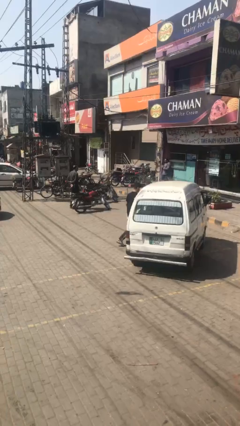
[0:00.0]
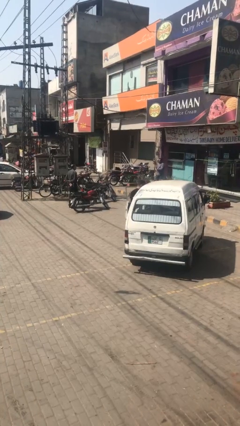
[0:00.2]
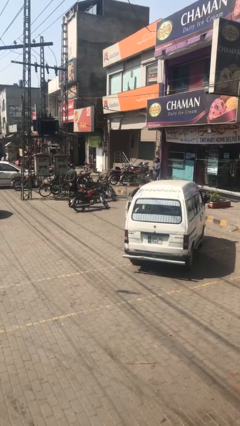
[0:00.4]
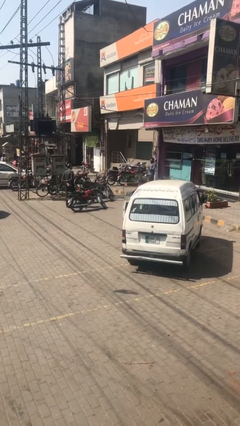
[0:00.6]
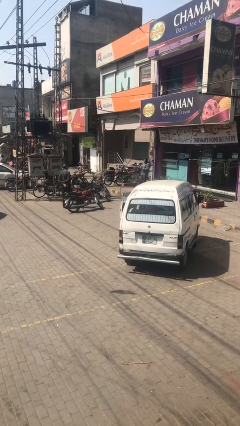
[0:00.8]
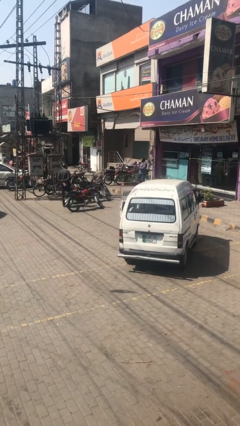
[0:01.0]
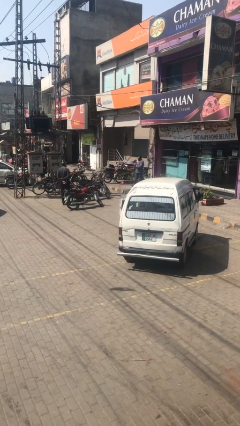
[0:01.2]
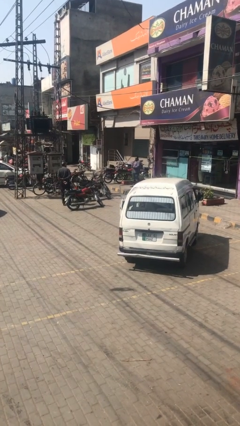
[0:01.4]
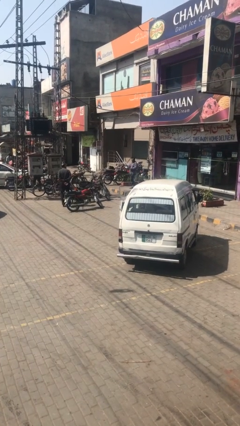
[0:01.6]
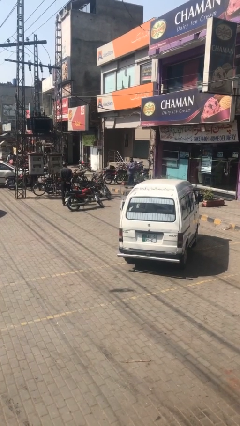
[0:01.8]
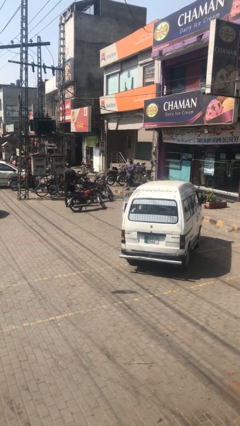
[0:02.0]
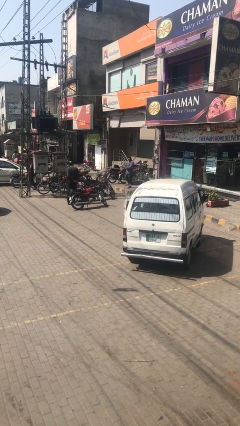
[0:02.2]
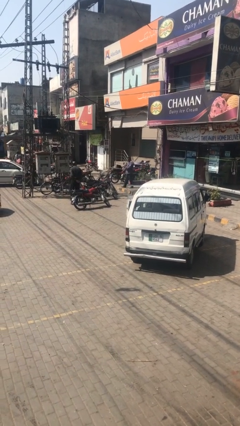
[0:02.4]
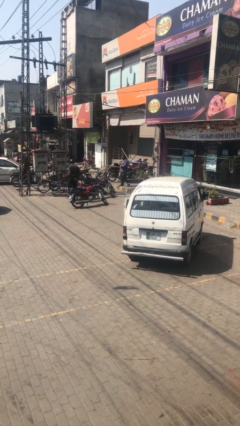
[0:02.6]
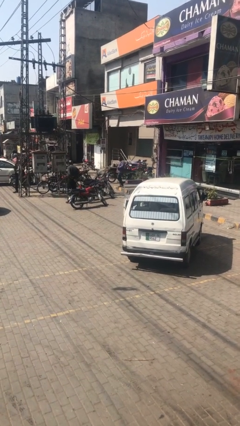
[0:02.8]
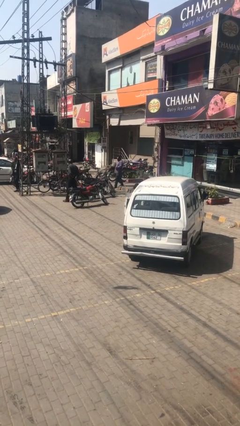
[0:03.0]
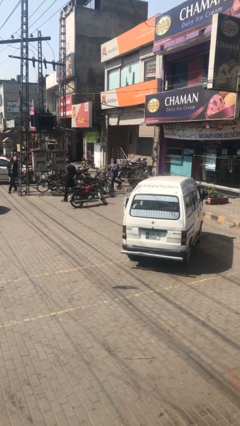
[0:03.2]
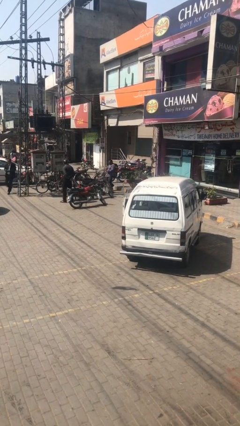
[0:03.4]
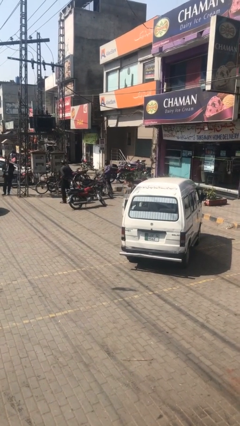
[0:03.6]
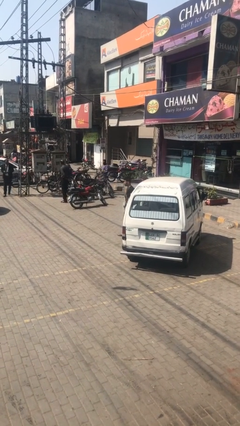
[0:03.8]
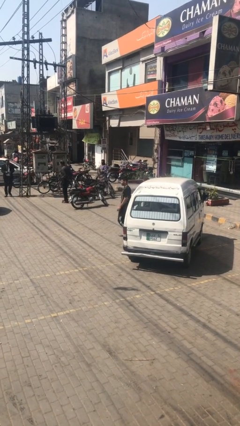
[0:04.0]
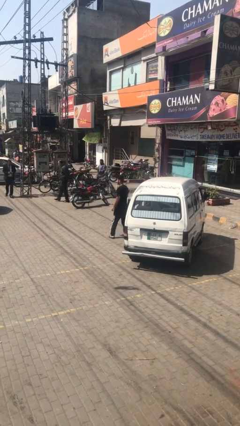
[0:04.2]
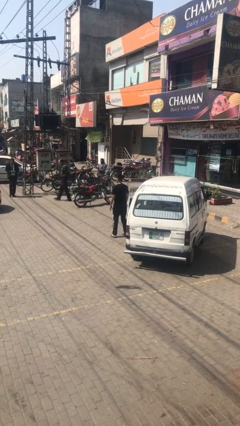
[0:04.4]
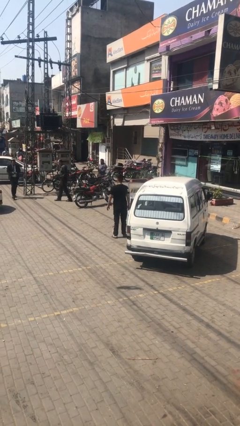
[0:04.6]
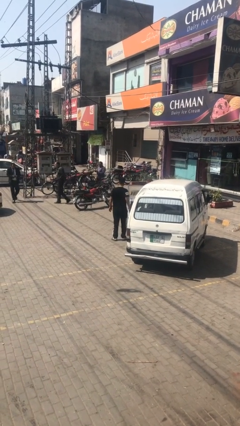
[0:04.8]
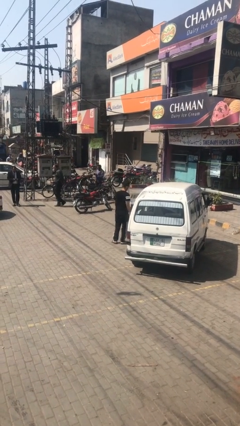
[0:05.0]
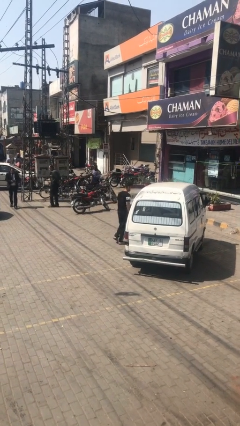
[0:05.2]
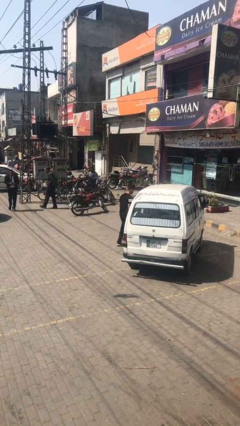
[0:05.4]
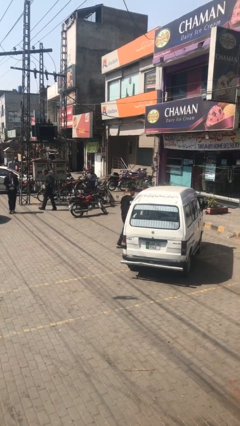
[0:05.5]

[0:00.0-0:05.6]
person enters car

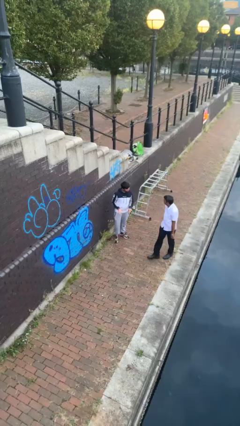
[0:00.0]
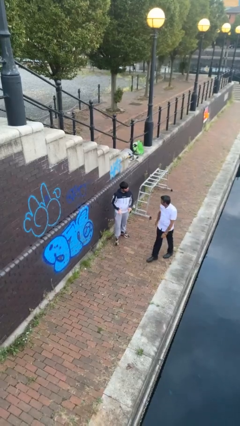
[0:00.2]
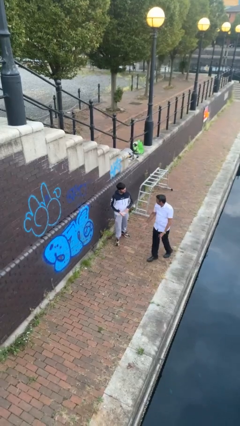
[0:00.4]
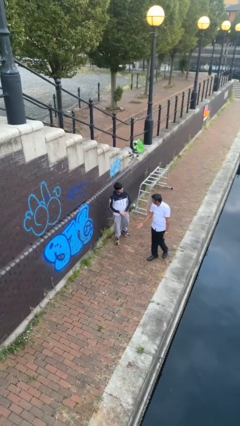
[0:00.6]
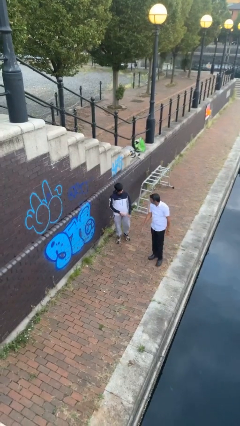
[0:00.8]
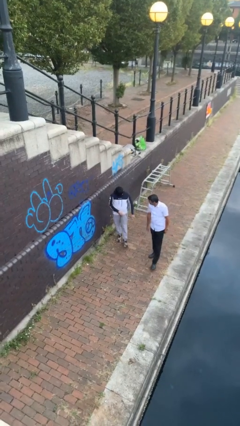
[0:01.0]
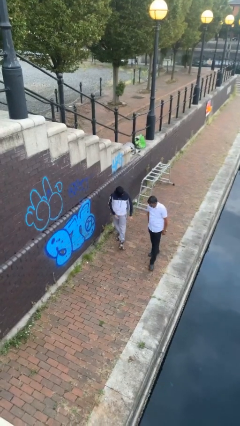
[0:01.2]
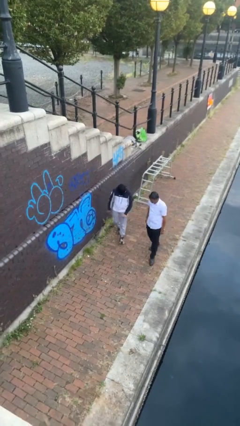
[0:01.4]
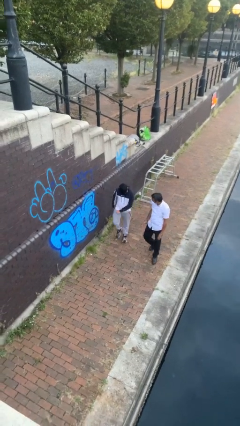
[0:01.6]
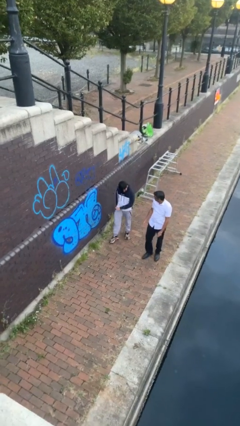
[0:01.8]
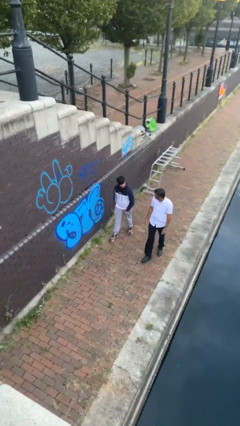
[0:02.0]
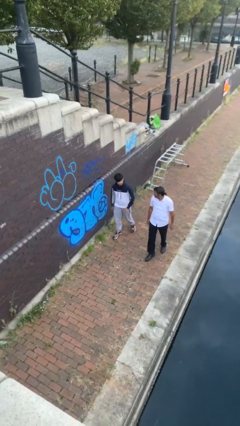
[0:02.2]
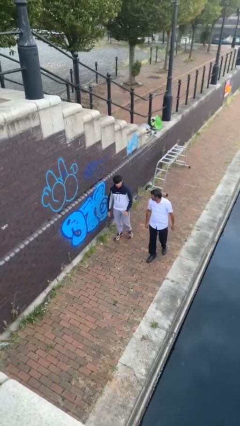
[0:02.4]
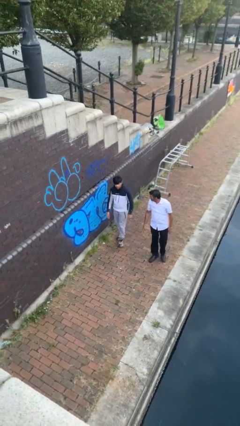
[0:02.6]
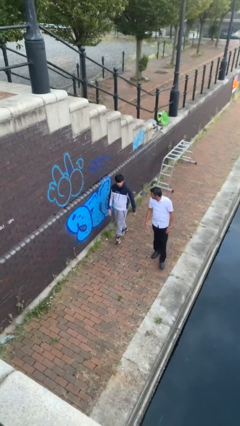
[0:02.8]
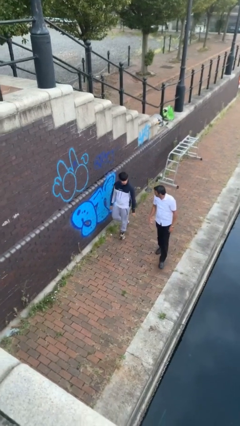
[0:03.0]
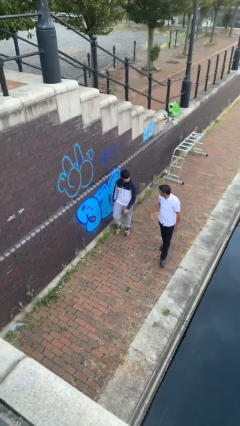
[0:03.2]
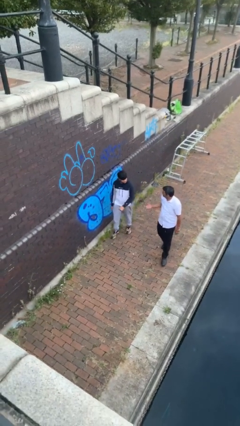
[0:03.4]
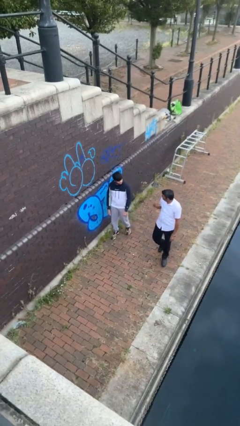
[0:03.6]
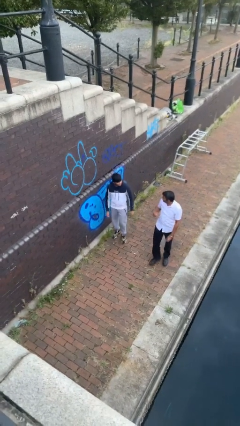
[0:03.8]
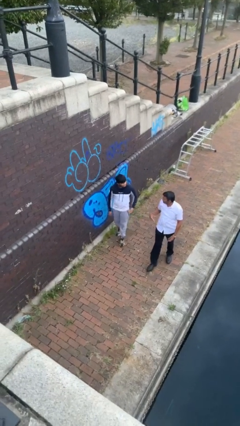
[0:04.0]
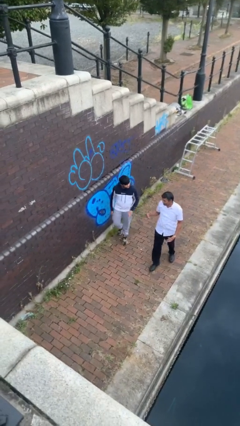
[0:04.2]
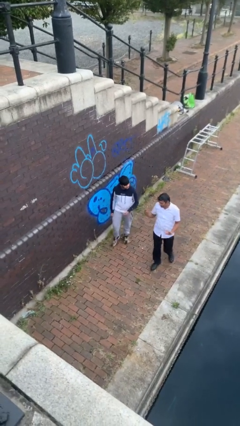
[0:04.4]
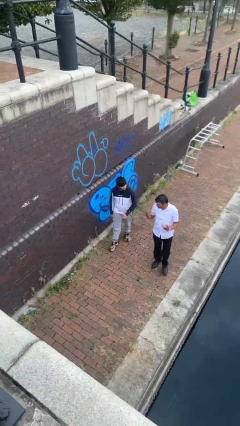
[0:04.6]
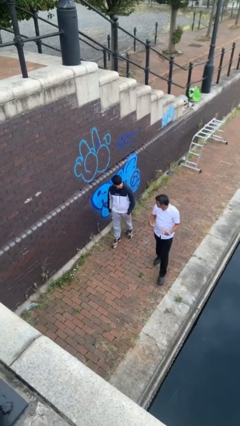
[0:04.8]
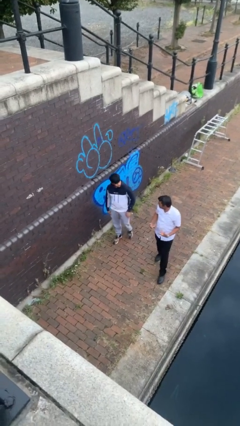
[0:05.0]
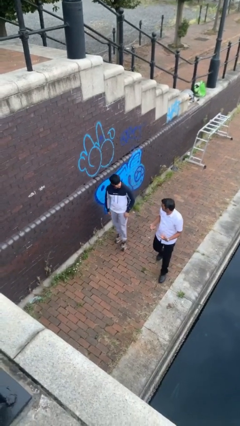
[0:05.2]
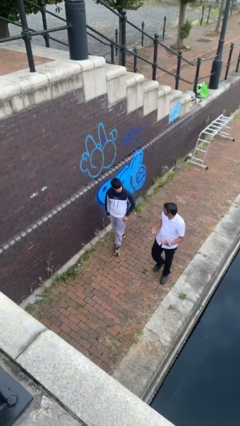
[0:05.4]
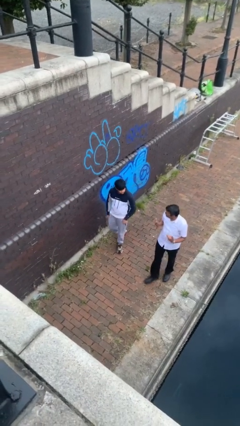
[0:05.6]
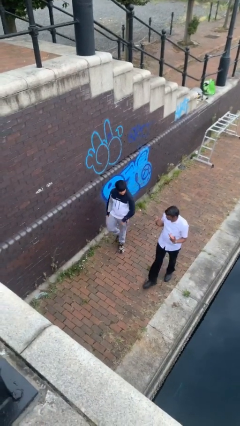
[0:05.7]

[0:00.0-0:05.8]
person talks to person

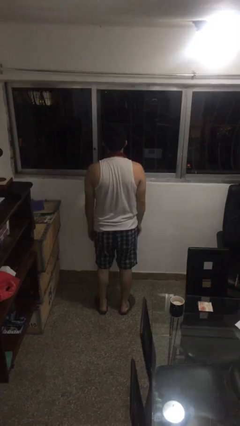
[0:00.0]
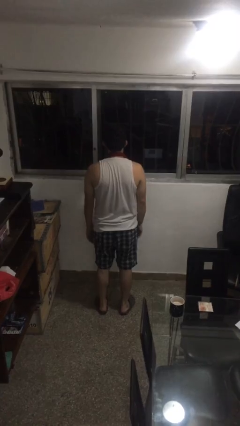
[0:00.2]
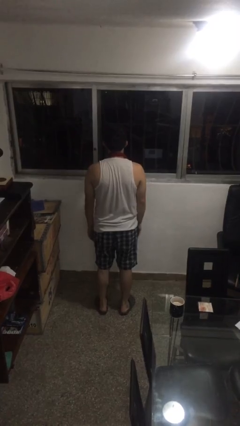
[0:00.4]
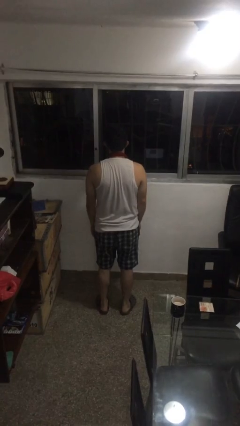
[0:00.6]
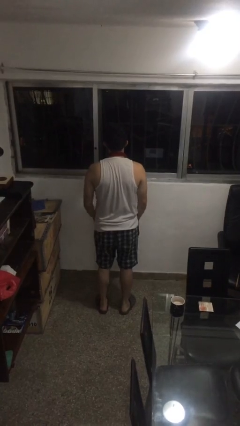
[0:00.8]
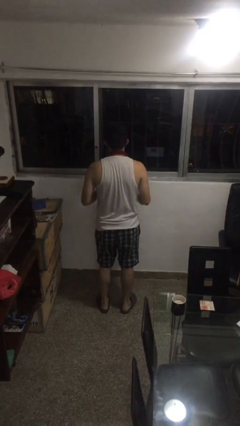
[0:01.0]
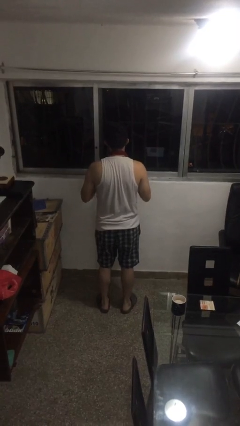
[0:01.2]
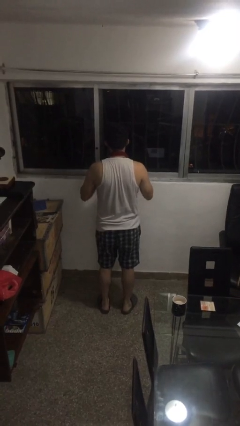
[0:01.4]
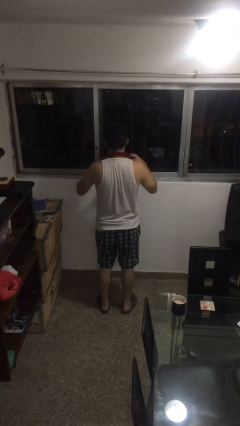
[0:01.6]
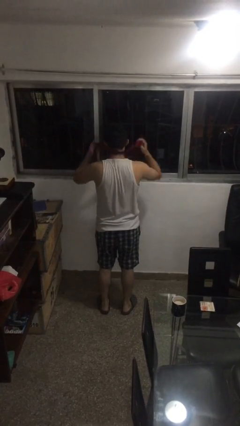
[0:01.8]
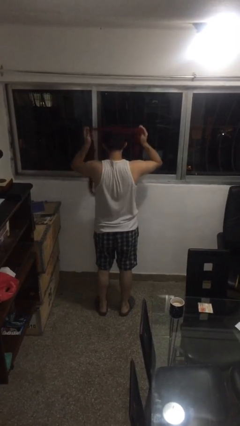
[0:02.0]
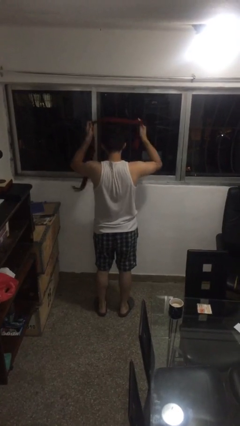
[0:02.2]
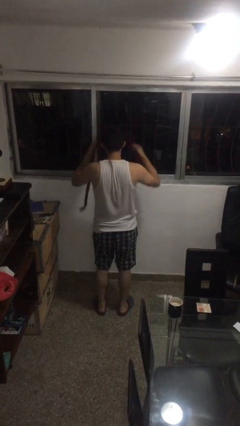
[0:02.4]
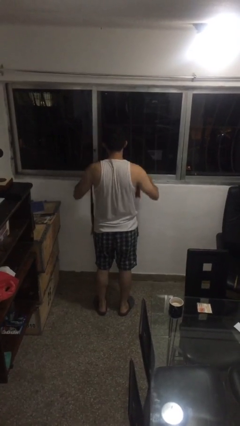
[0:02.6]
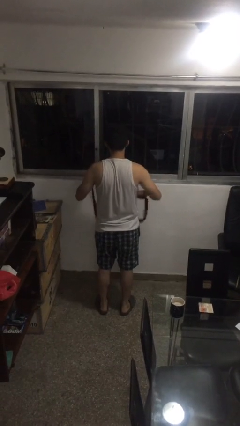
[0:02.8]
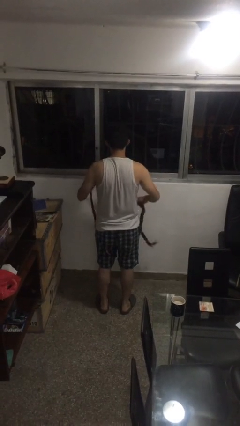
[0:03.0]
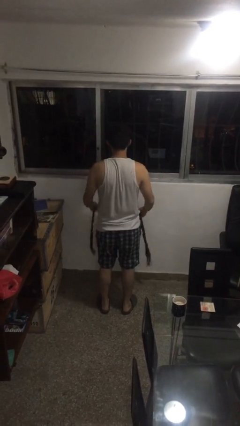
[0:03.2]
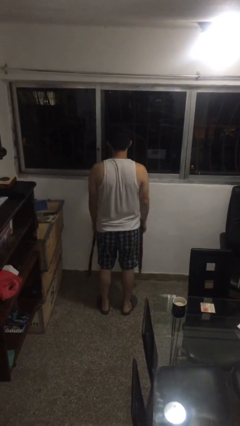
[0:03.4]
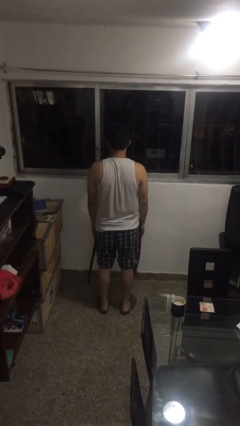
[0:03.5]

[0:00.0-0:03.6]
person takes off scarf

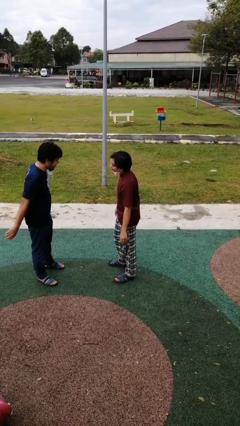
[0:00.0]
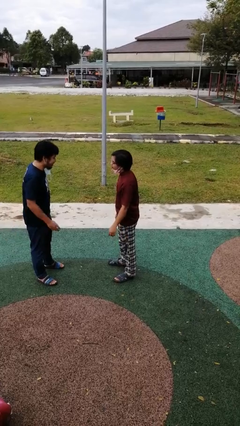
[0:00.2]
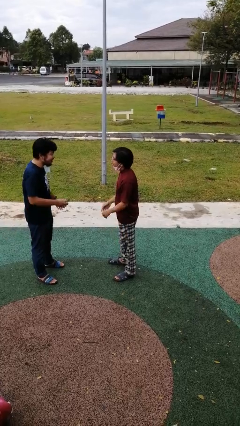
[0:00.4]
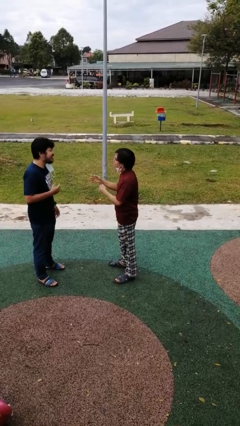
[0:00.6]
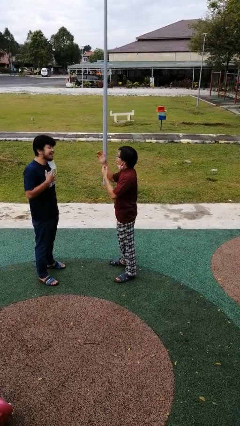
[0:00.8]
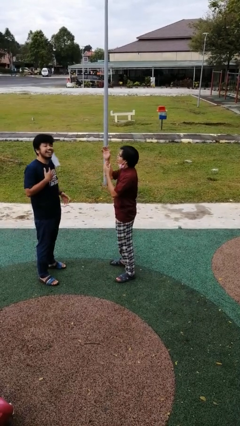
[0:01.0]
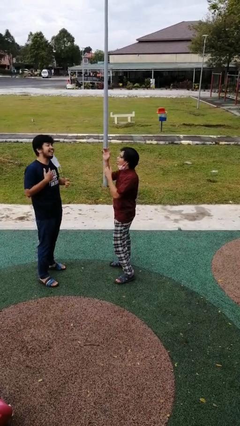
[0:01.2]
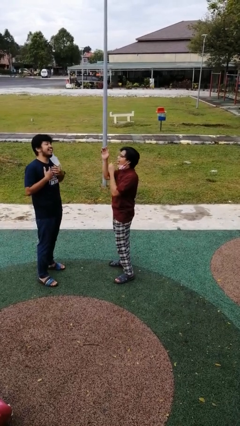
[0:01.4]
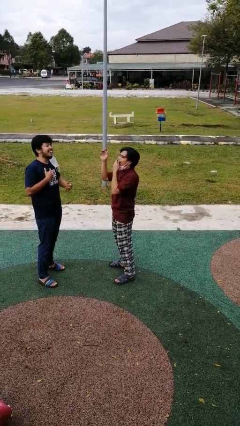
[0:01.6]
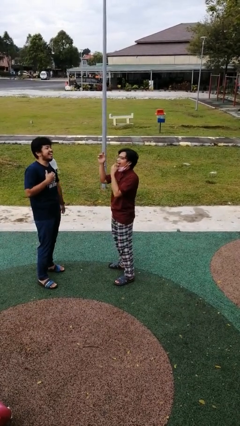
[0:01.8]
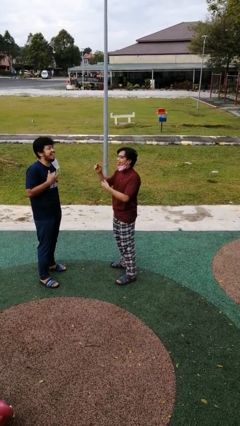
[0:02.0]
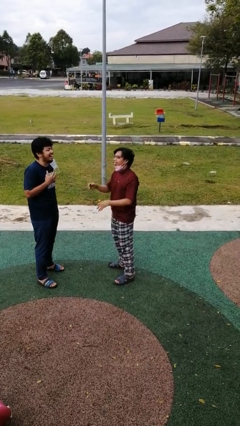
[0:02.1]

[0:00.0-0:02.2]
person laughs with person

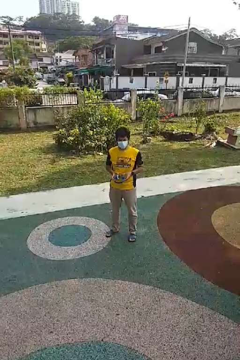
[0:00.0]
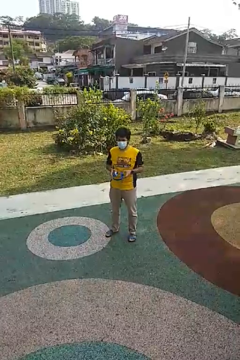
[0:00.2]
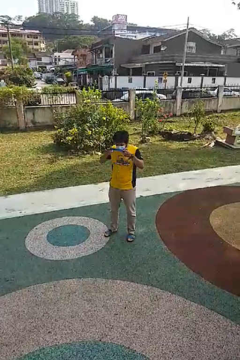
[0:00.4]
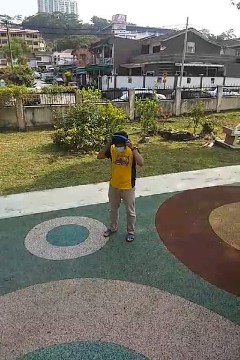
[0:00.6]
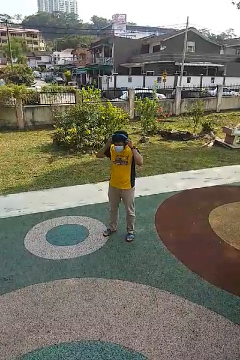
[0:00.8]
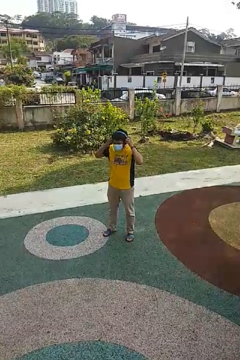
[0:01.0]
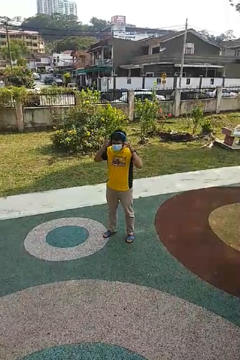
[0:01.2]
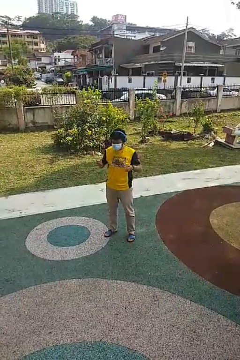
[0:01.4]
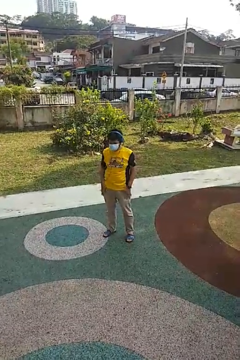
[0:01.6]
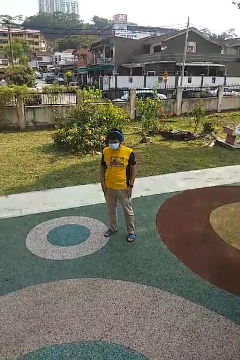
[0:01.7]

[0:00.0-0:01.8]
person puts on headphones
